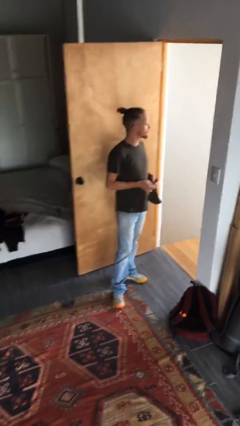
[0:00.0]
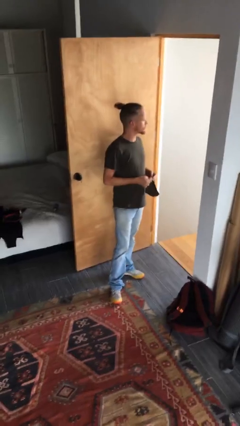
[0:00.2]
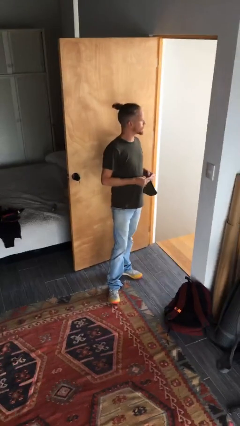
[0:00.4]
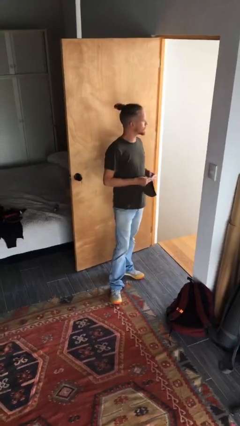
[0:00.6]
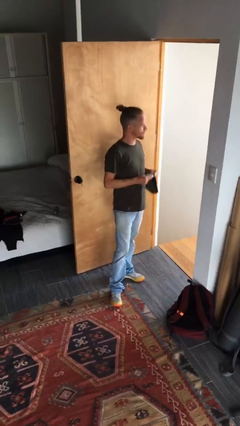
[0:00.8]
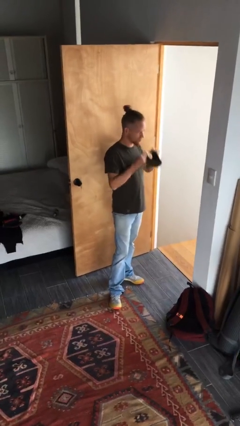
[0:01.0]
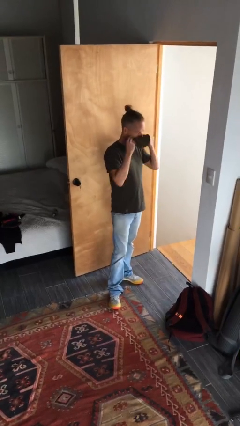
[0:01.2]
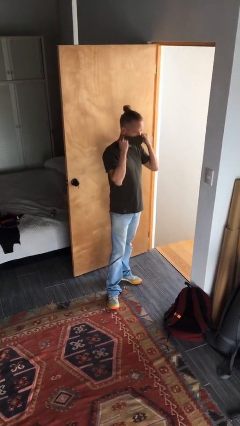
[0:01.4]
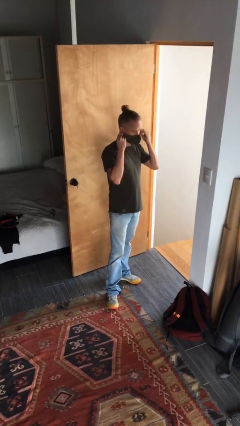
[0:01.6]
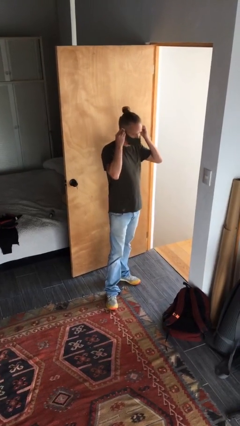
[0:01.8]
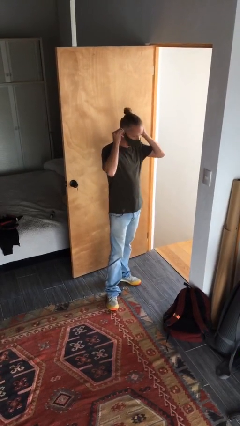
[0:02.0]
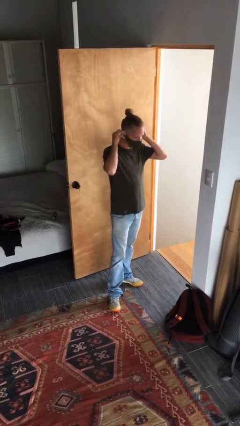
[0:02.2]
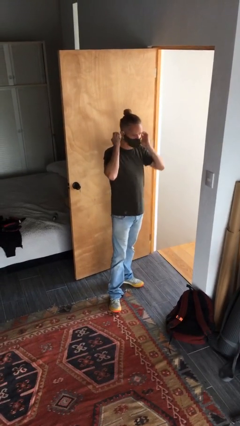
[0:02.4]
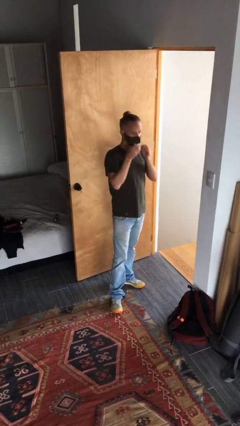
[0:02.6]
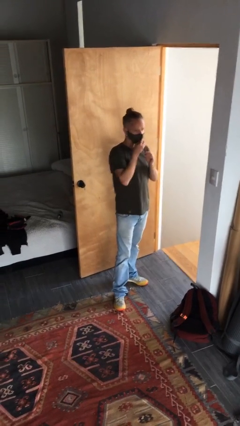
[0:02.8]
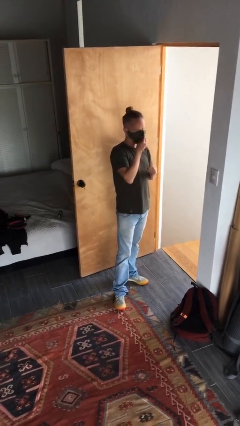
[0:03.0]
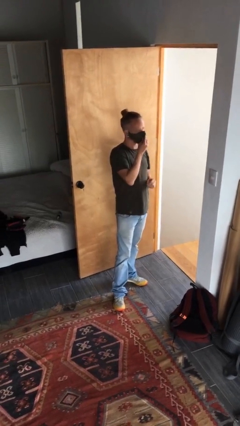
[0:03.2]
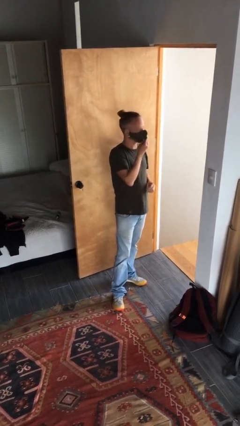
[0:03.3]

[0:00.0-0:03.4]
person puts on facemask

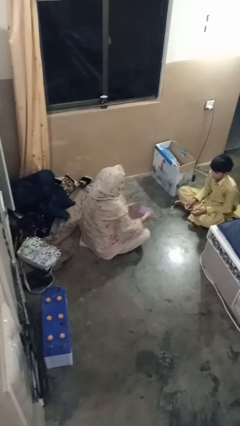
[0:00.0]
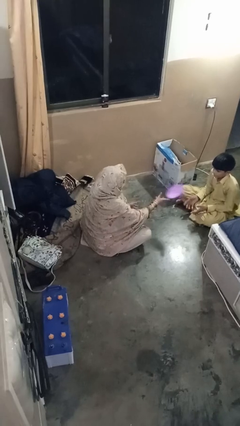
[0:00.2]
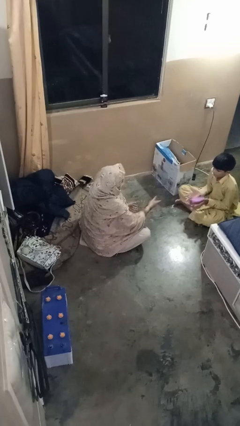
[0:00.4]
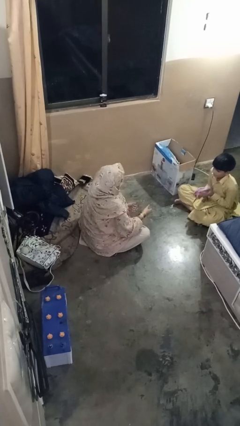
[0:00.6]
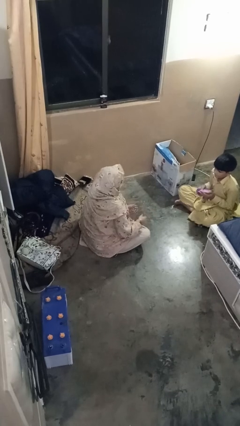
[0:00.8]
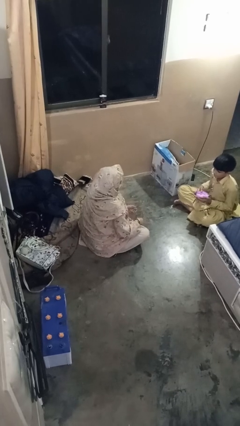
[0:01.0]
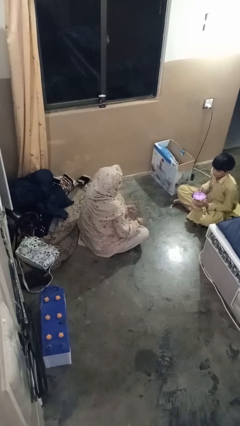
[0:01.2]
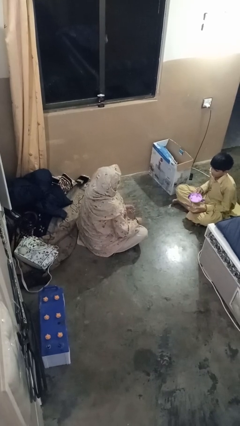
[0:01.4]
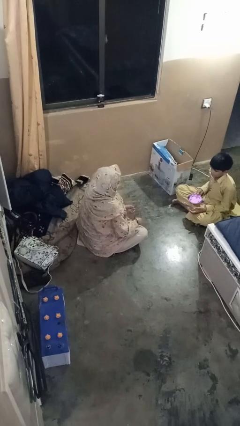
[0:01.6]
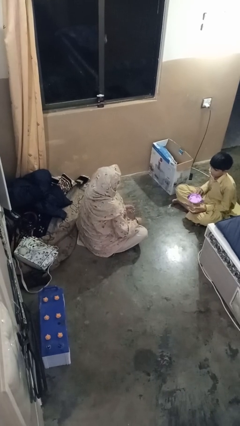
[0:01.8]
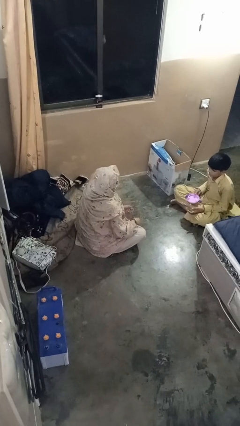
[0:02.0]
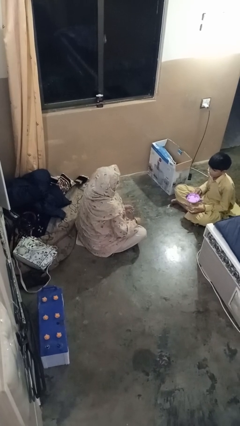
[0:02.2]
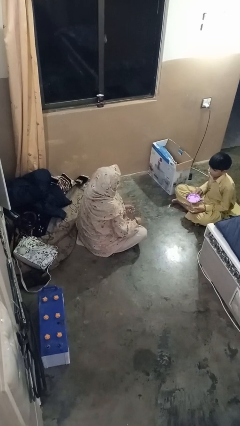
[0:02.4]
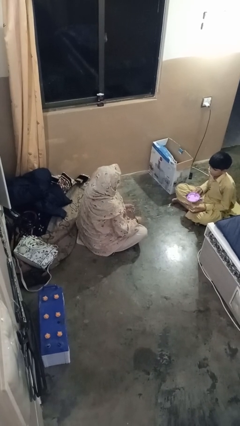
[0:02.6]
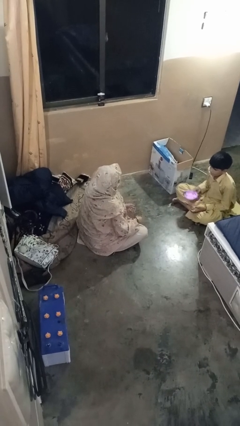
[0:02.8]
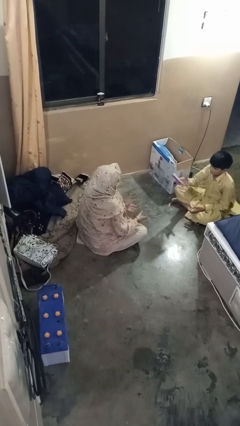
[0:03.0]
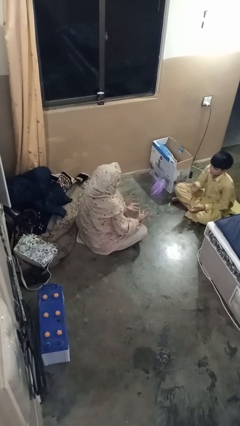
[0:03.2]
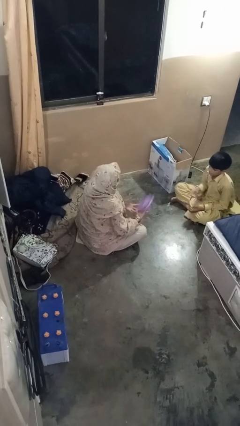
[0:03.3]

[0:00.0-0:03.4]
person throws object to person

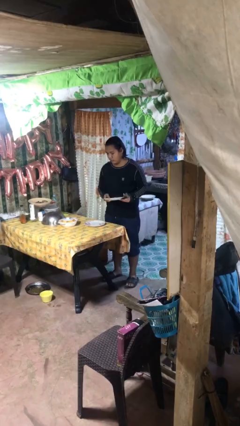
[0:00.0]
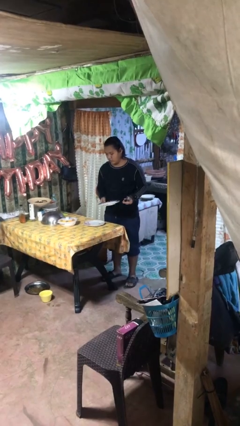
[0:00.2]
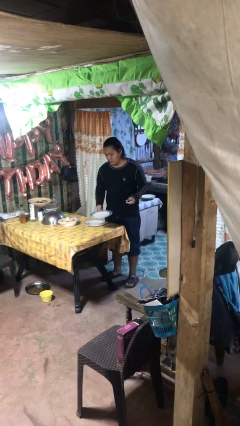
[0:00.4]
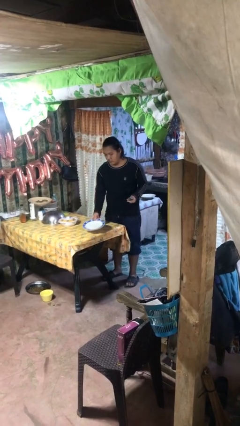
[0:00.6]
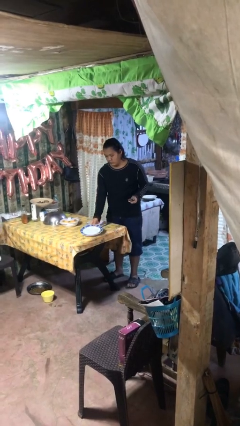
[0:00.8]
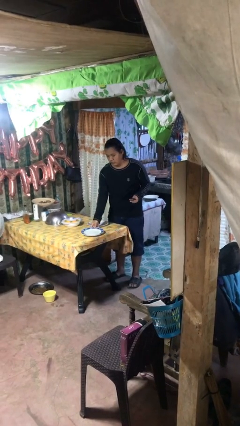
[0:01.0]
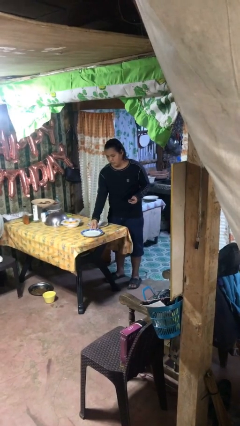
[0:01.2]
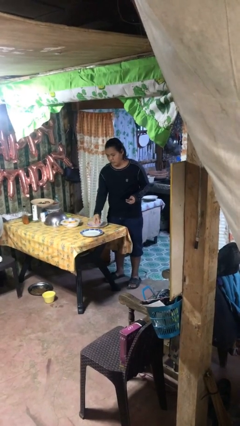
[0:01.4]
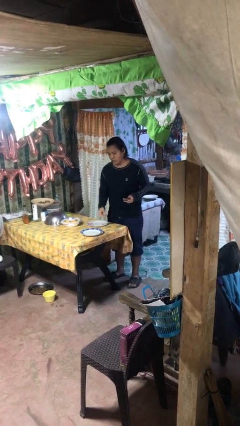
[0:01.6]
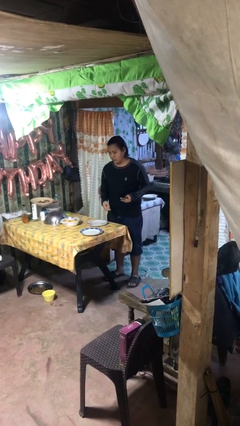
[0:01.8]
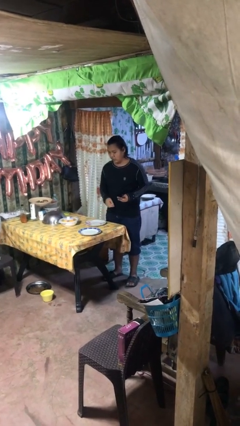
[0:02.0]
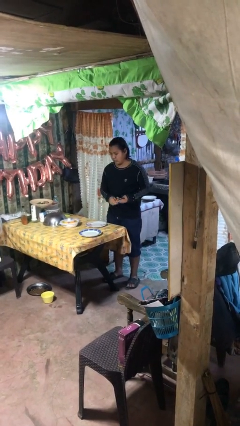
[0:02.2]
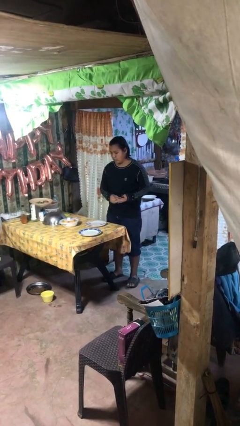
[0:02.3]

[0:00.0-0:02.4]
person sets table

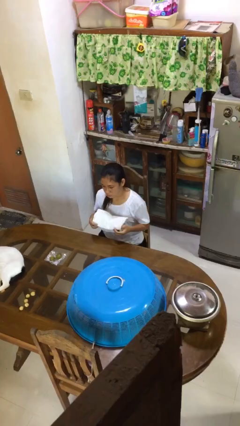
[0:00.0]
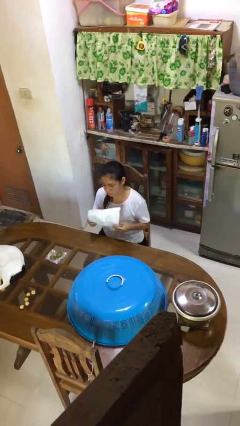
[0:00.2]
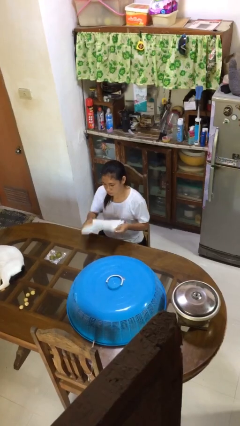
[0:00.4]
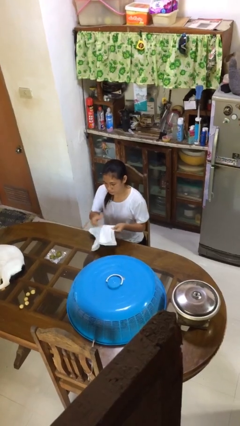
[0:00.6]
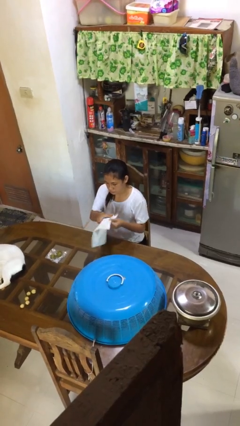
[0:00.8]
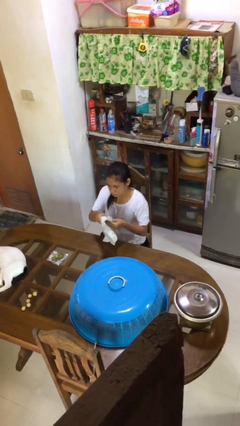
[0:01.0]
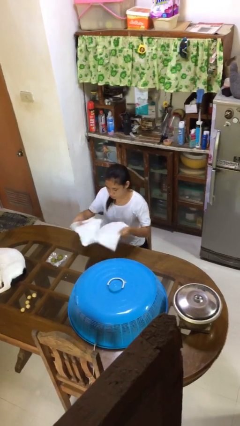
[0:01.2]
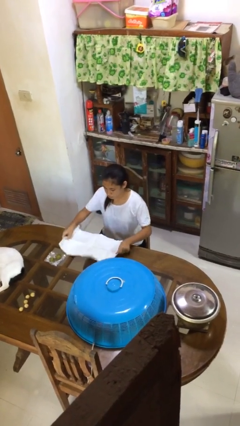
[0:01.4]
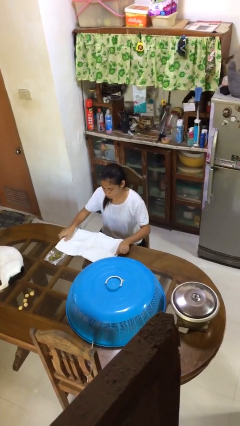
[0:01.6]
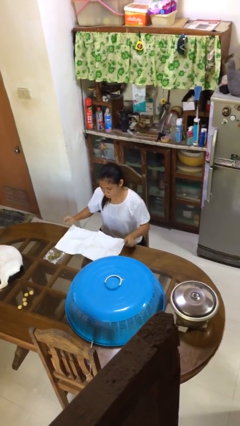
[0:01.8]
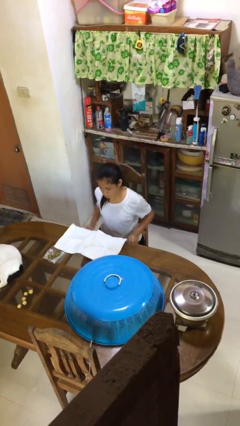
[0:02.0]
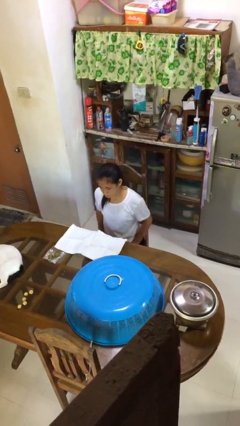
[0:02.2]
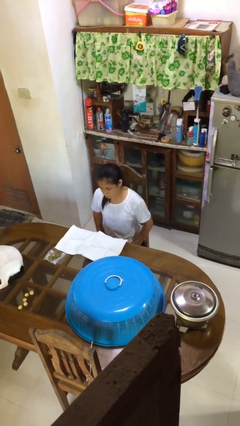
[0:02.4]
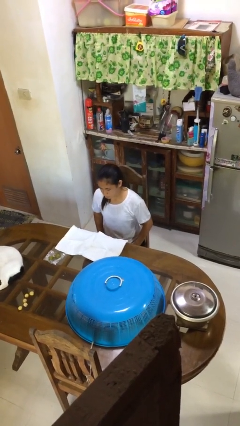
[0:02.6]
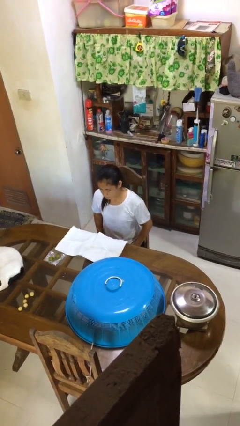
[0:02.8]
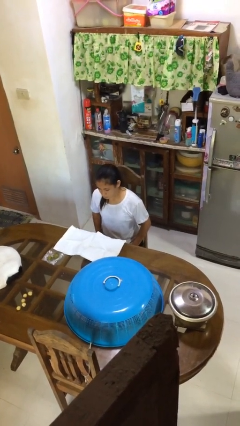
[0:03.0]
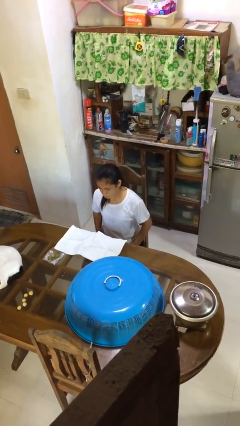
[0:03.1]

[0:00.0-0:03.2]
person spreads tablecloth

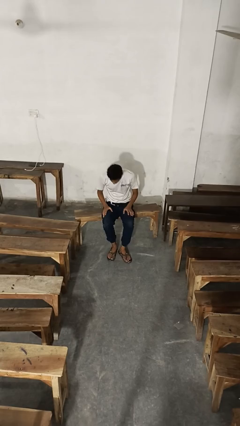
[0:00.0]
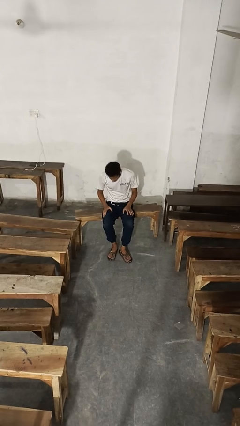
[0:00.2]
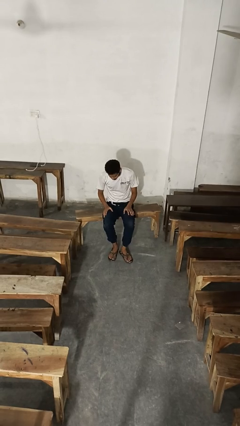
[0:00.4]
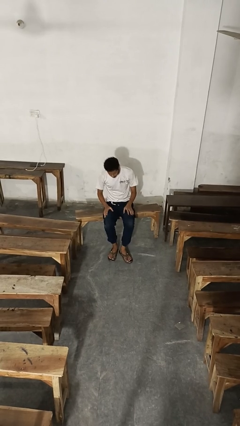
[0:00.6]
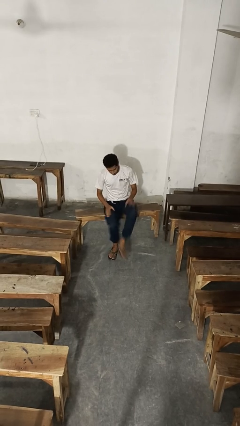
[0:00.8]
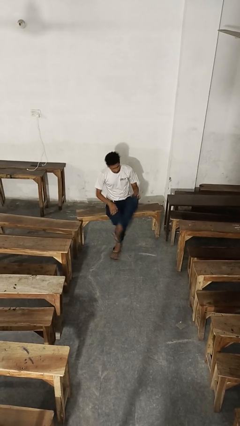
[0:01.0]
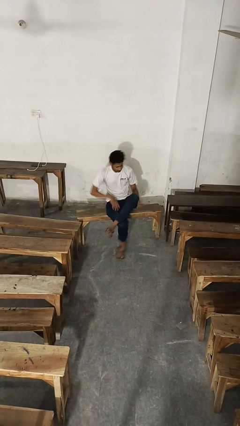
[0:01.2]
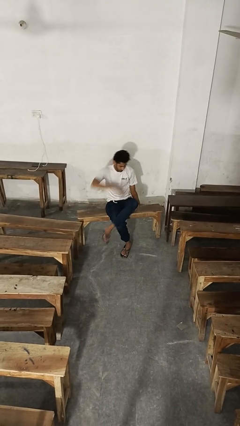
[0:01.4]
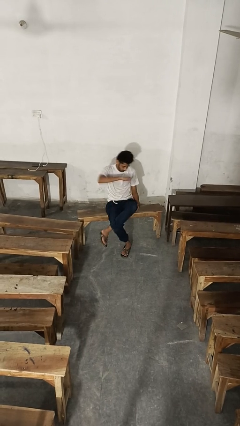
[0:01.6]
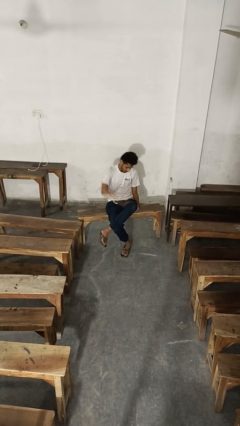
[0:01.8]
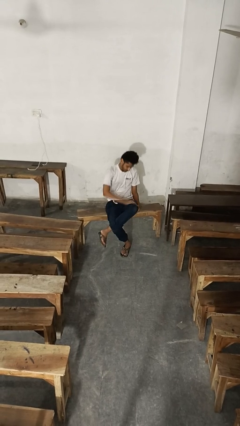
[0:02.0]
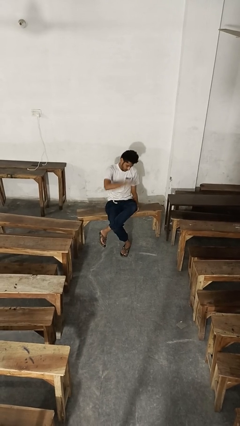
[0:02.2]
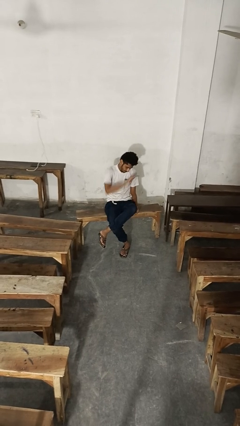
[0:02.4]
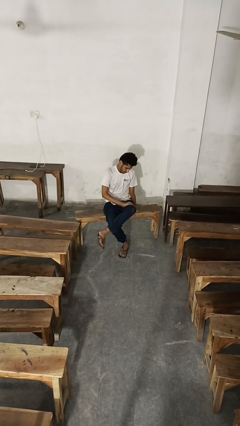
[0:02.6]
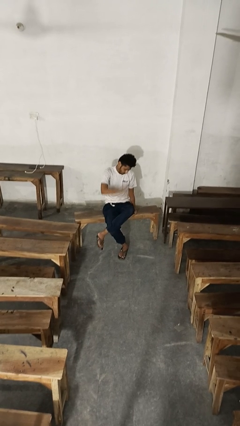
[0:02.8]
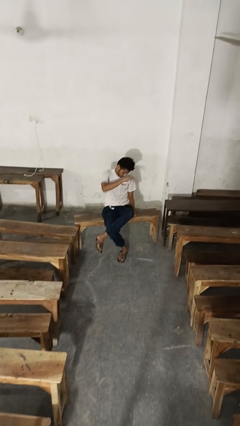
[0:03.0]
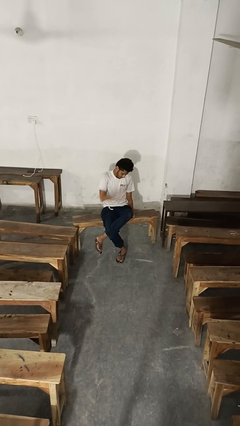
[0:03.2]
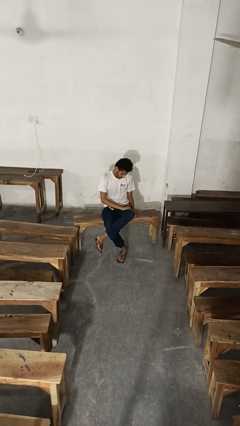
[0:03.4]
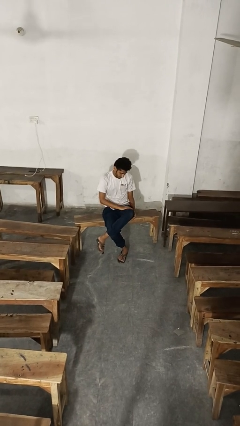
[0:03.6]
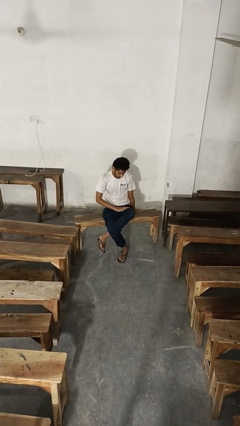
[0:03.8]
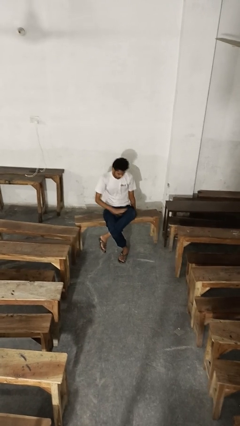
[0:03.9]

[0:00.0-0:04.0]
person slaps hands on thighs

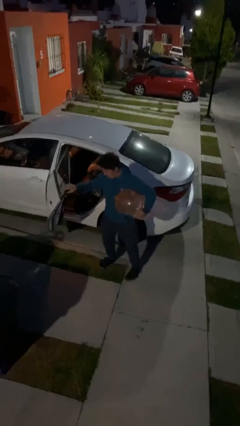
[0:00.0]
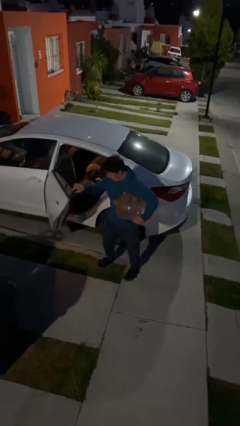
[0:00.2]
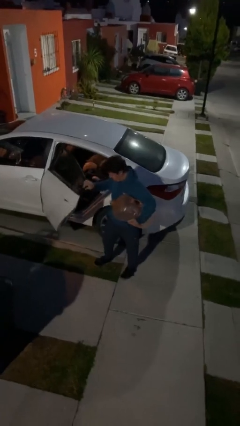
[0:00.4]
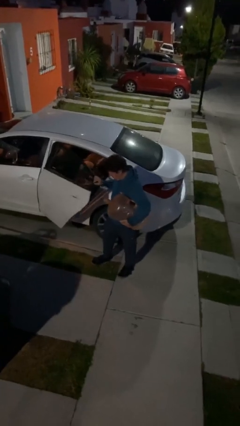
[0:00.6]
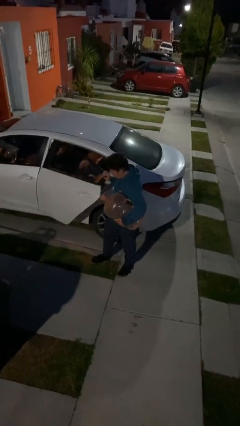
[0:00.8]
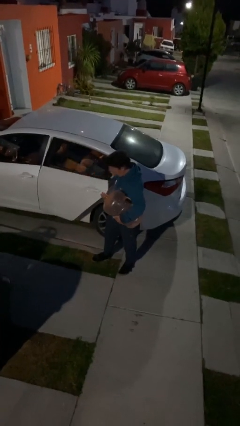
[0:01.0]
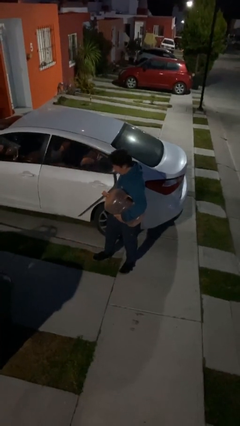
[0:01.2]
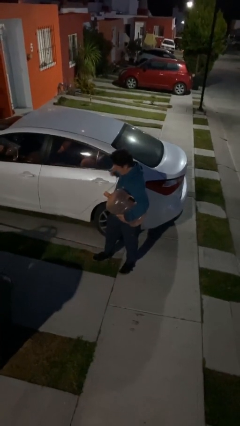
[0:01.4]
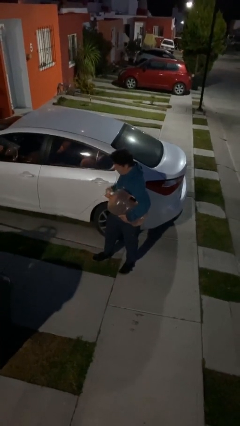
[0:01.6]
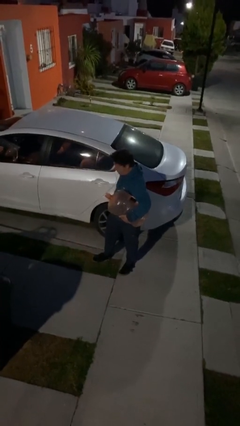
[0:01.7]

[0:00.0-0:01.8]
person closes car door
